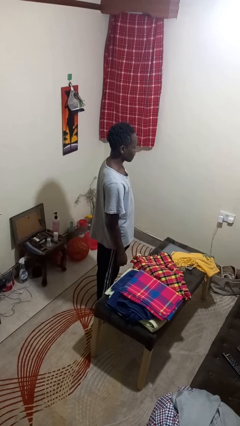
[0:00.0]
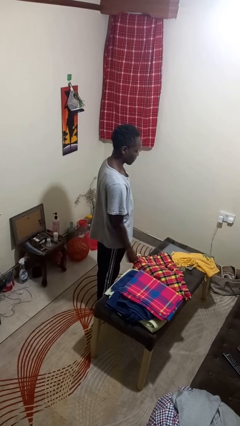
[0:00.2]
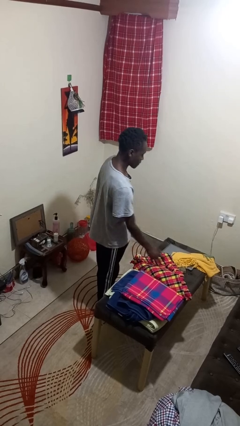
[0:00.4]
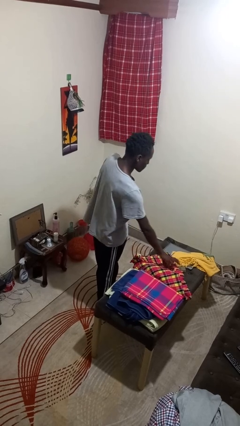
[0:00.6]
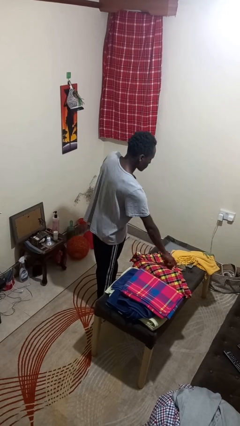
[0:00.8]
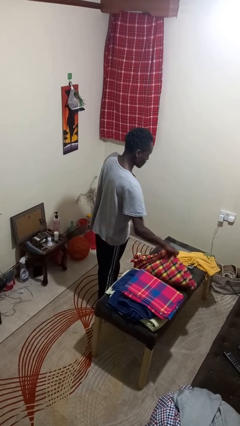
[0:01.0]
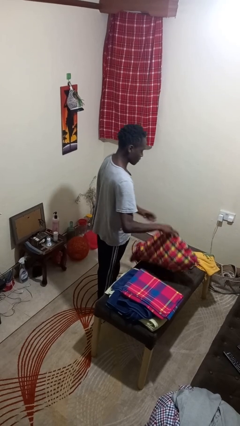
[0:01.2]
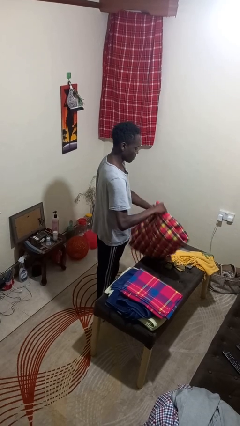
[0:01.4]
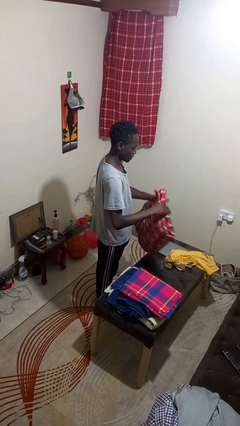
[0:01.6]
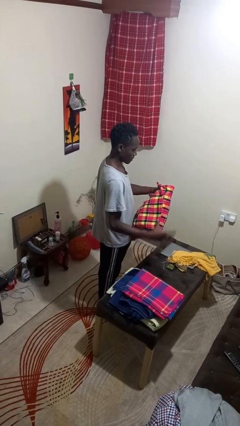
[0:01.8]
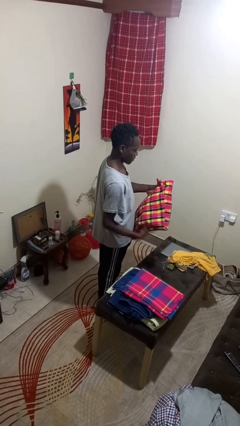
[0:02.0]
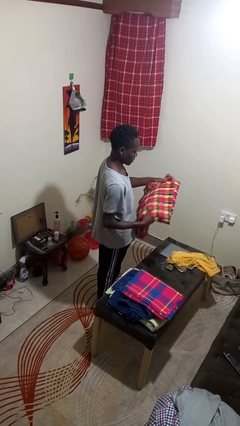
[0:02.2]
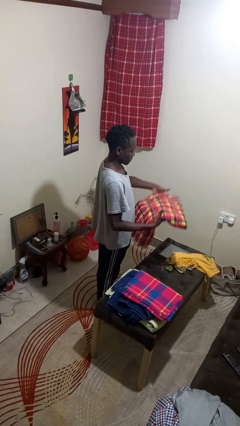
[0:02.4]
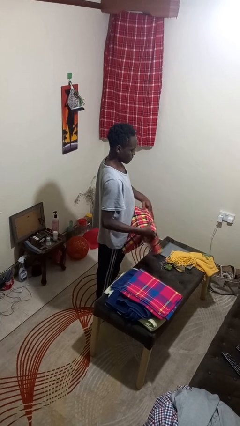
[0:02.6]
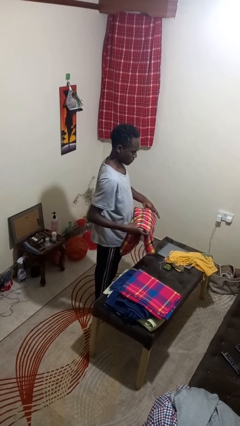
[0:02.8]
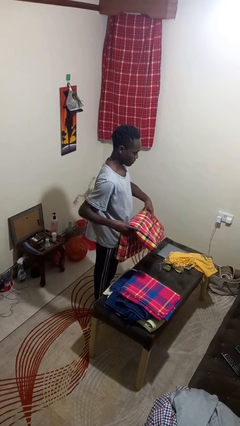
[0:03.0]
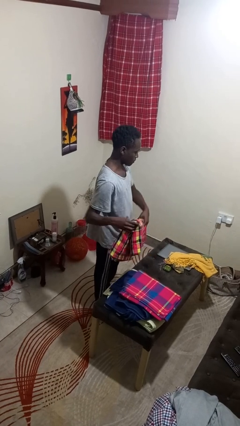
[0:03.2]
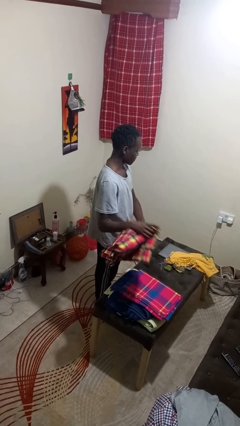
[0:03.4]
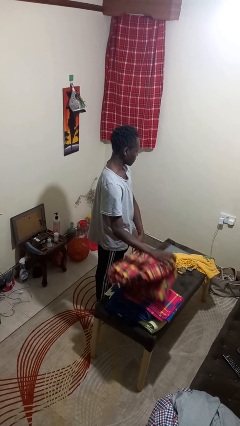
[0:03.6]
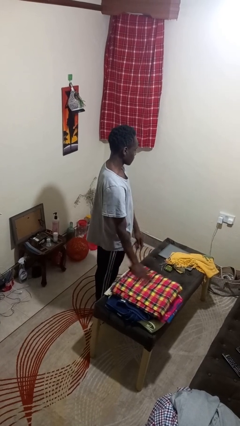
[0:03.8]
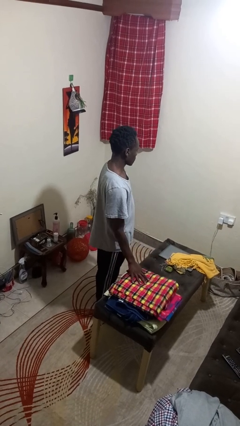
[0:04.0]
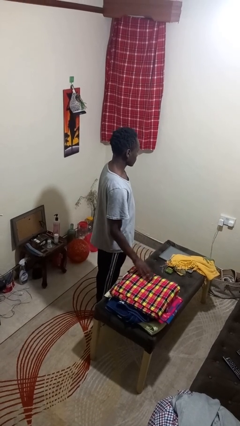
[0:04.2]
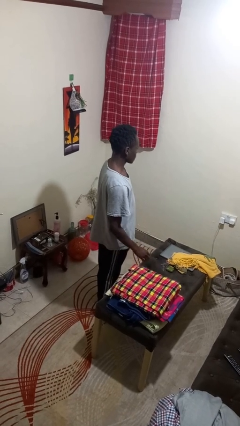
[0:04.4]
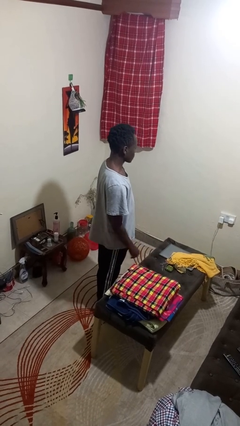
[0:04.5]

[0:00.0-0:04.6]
person folds towel

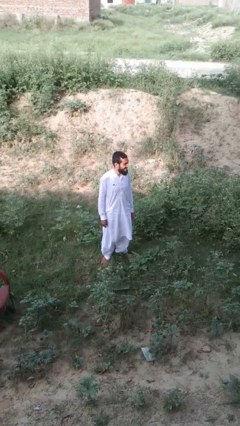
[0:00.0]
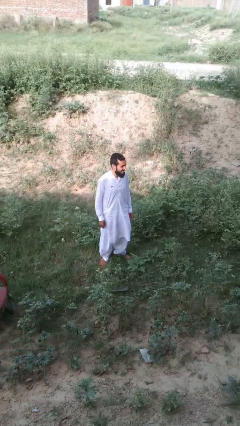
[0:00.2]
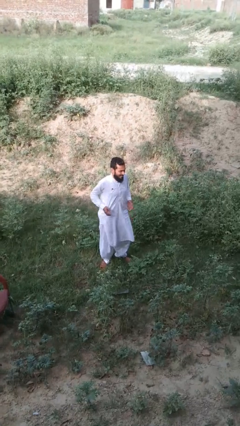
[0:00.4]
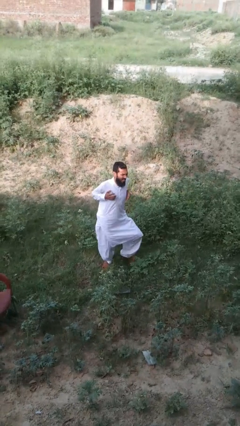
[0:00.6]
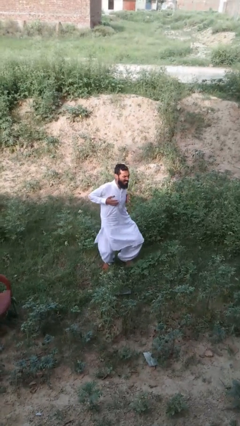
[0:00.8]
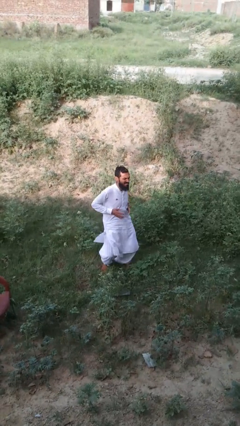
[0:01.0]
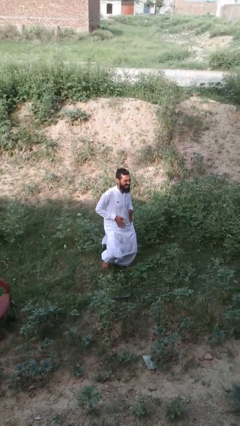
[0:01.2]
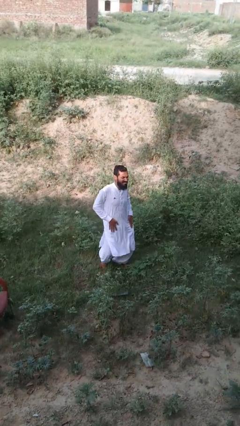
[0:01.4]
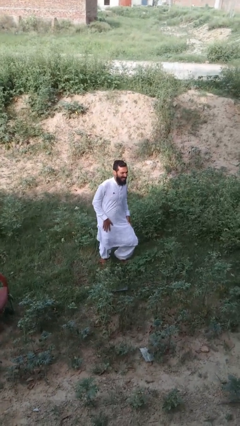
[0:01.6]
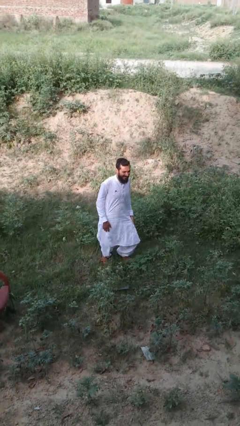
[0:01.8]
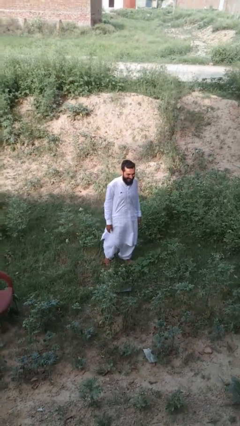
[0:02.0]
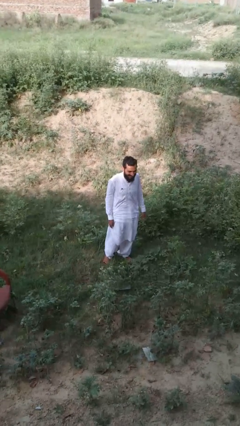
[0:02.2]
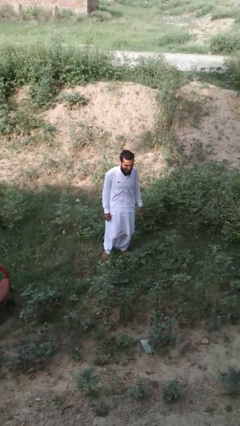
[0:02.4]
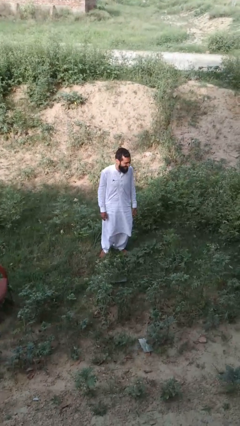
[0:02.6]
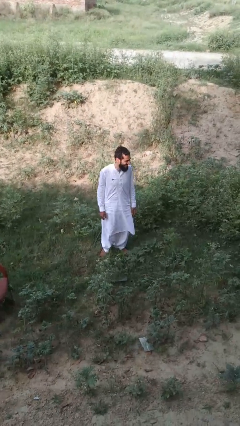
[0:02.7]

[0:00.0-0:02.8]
person dances in place

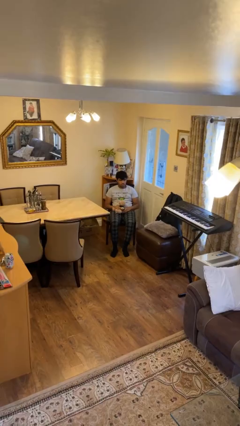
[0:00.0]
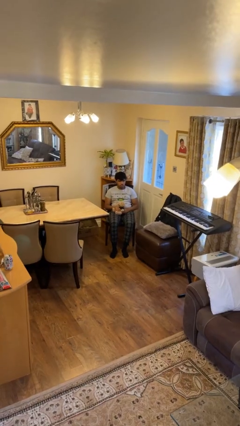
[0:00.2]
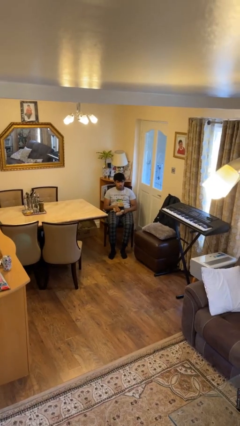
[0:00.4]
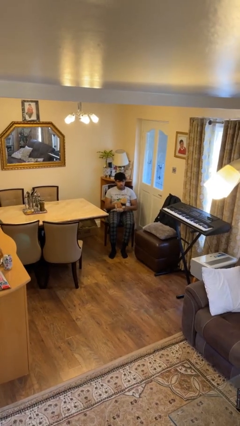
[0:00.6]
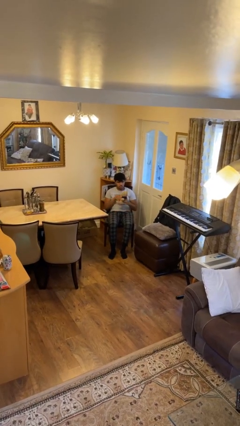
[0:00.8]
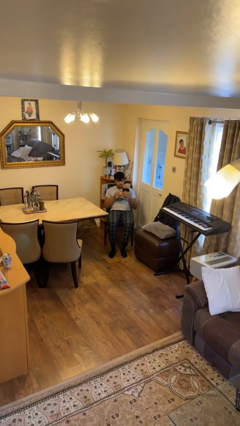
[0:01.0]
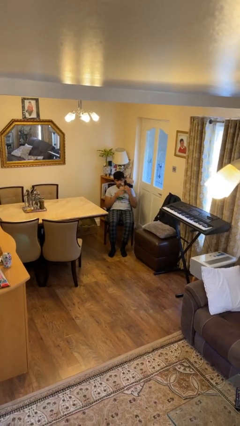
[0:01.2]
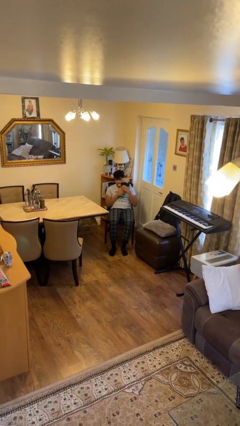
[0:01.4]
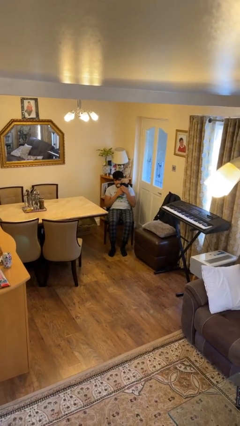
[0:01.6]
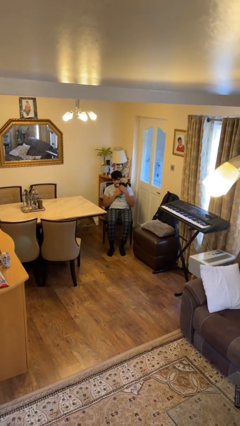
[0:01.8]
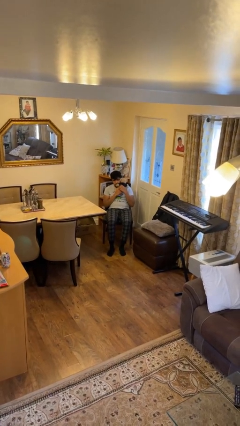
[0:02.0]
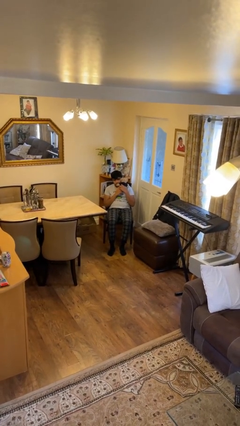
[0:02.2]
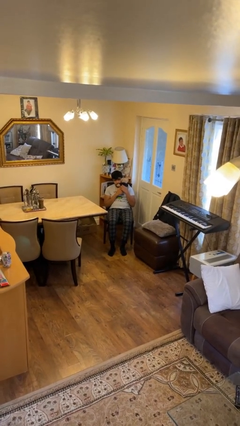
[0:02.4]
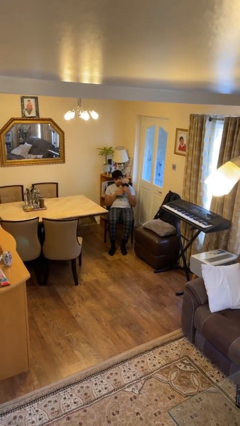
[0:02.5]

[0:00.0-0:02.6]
person hugs stuffed animal

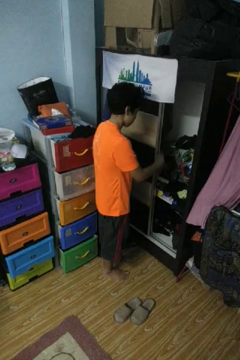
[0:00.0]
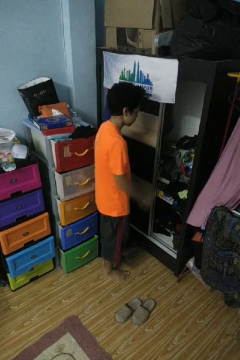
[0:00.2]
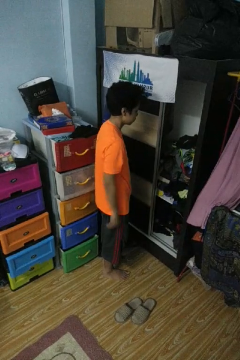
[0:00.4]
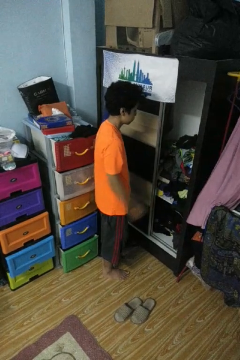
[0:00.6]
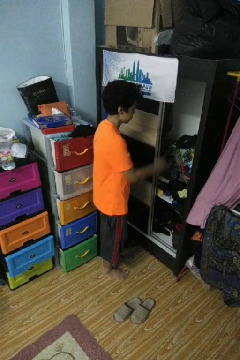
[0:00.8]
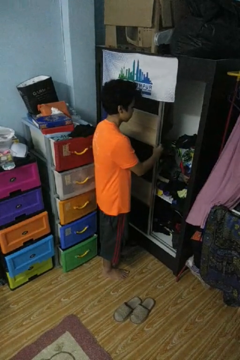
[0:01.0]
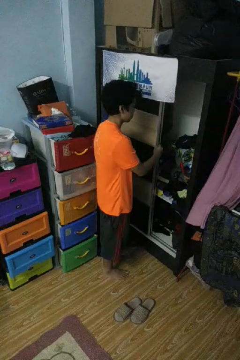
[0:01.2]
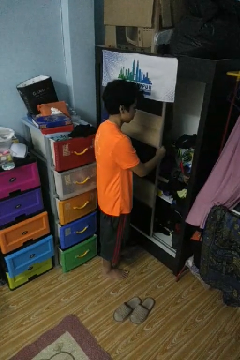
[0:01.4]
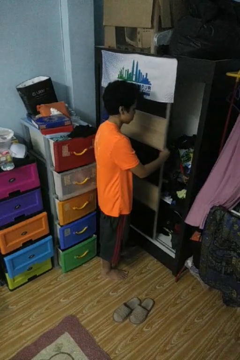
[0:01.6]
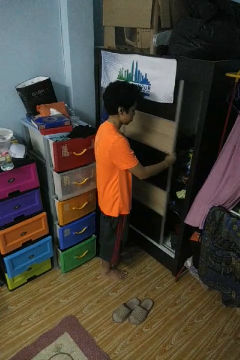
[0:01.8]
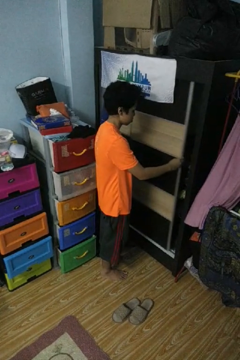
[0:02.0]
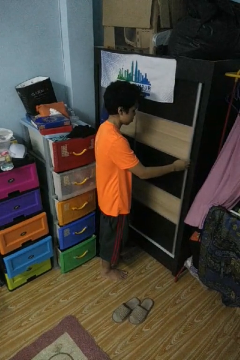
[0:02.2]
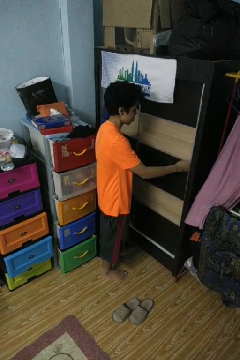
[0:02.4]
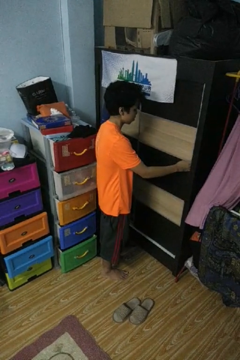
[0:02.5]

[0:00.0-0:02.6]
person closes closet door

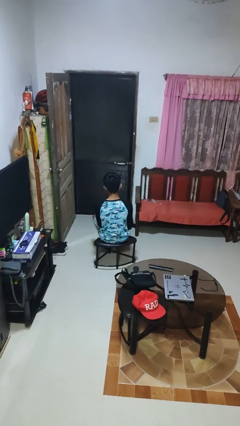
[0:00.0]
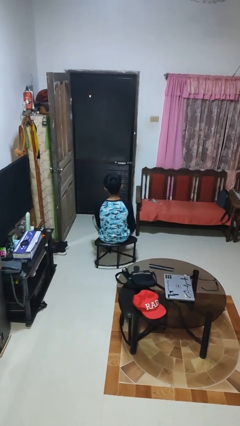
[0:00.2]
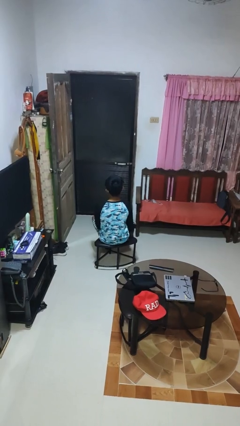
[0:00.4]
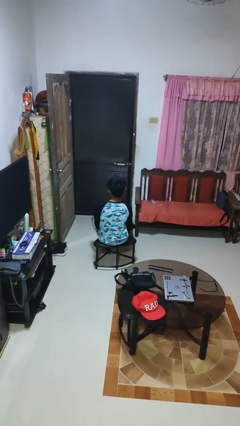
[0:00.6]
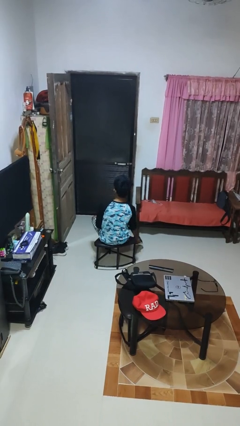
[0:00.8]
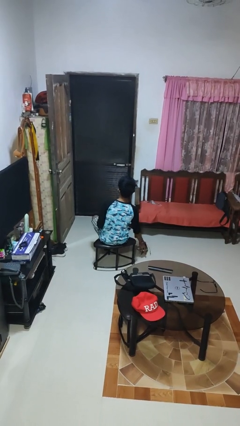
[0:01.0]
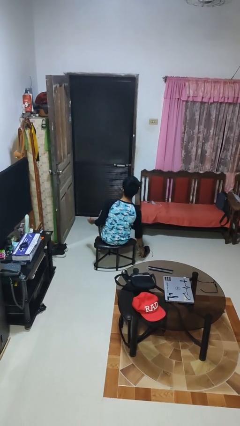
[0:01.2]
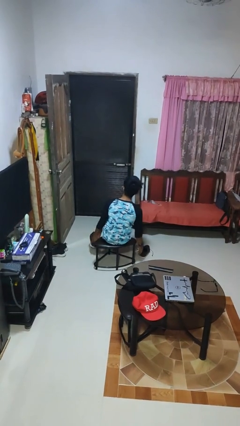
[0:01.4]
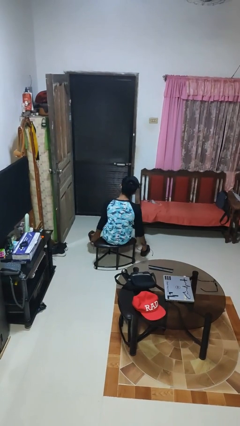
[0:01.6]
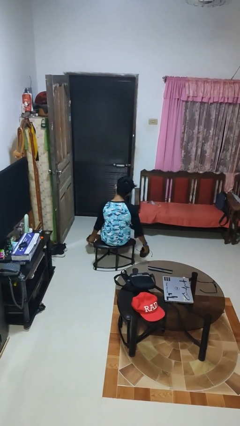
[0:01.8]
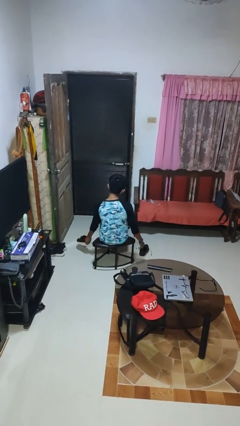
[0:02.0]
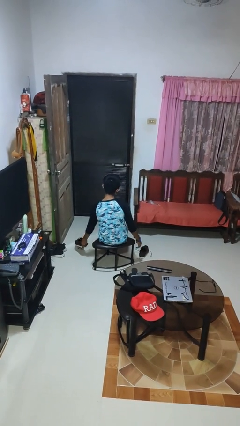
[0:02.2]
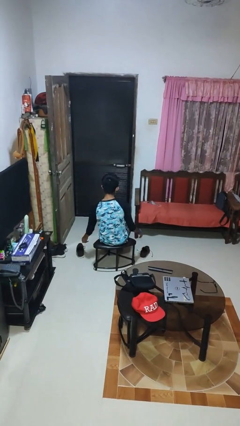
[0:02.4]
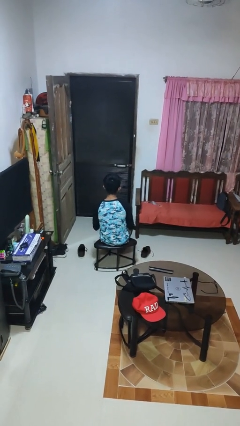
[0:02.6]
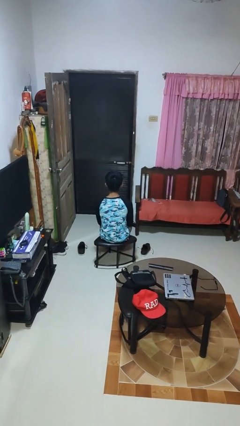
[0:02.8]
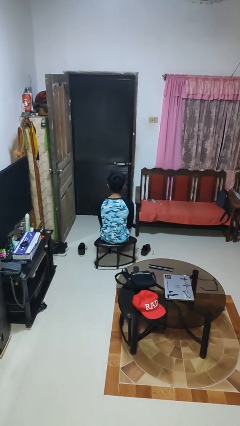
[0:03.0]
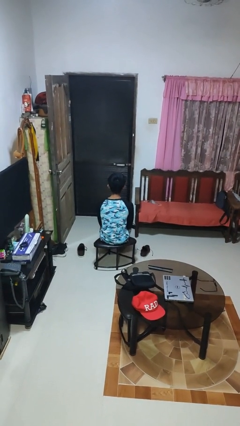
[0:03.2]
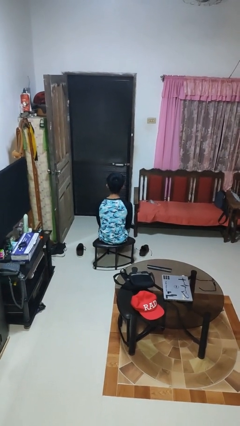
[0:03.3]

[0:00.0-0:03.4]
person takes off shoes

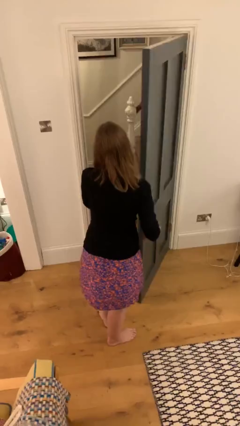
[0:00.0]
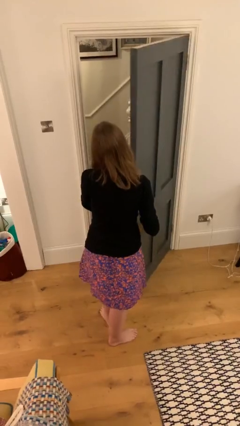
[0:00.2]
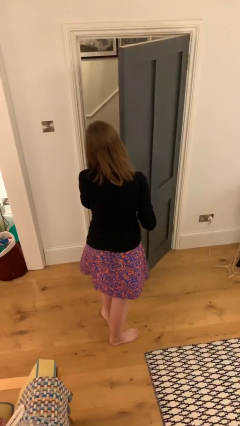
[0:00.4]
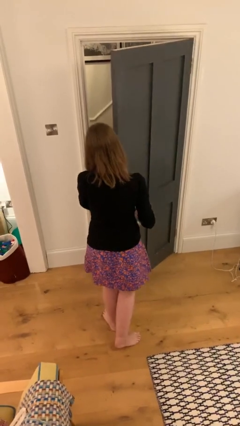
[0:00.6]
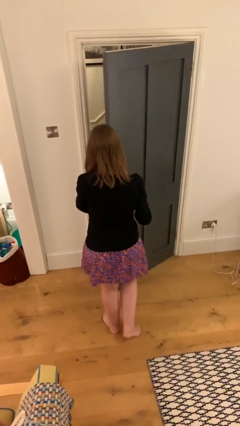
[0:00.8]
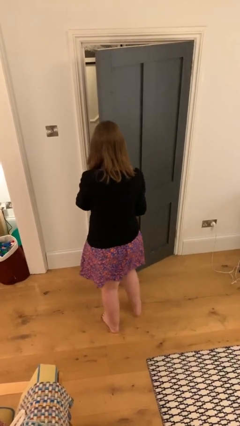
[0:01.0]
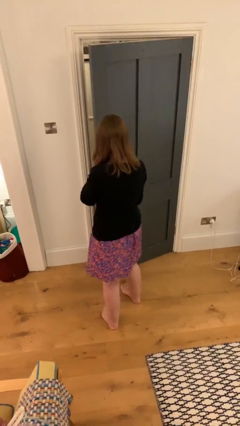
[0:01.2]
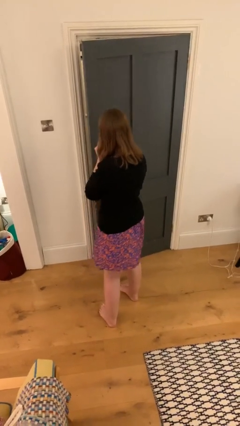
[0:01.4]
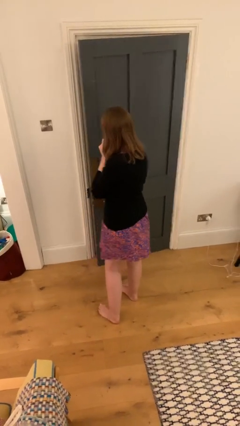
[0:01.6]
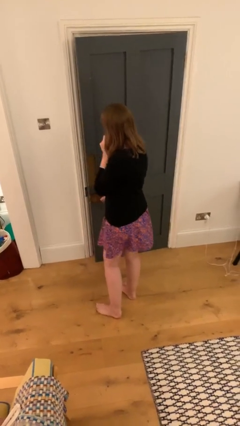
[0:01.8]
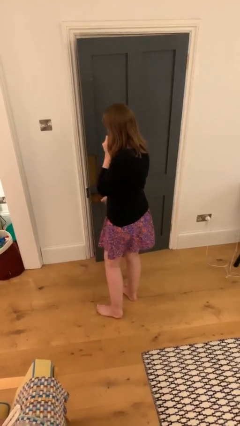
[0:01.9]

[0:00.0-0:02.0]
person closes facility door
